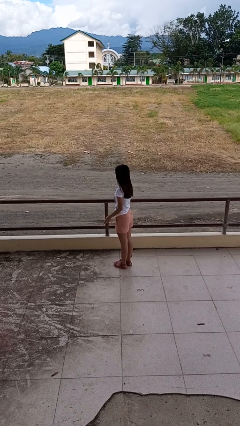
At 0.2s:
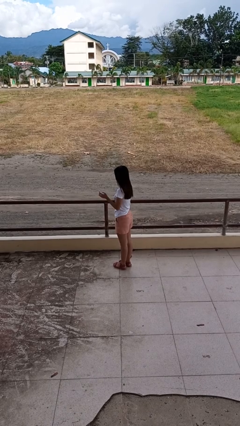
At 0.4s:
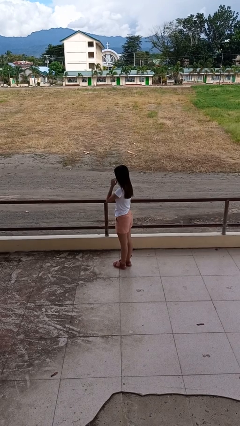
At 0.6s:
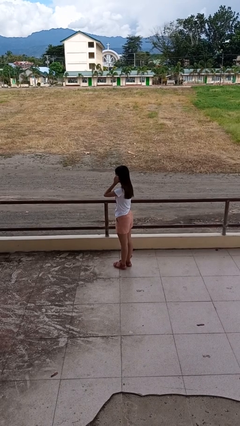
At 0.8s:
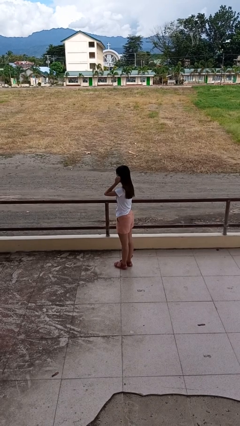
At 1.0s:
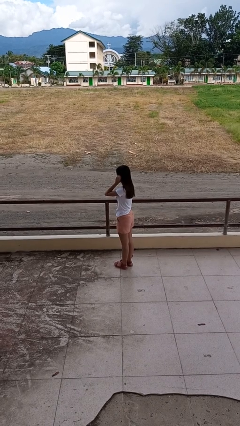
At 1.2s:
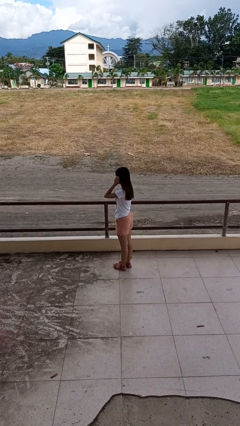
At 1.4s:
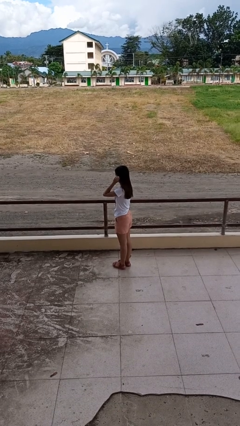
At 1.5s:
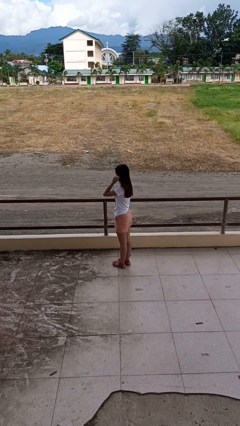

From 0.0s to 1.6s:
person touches earlobe

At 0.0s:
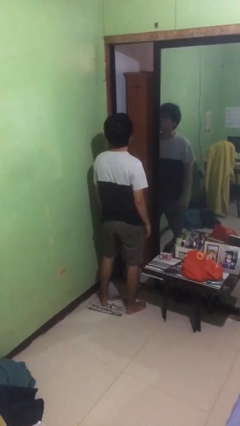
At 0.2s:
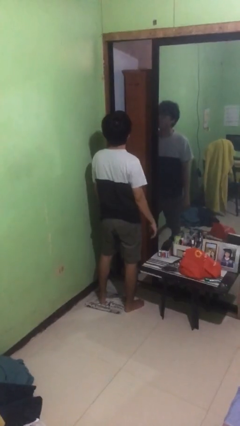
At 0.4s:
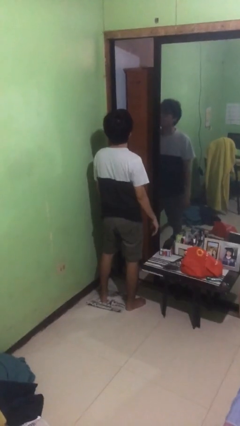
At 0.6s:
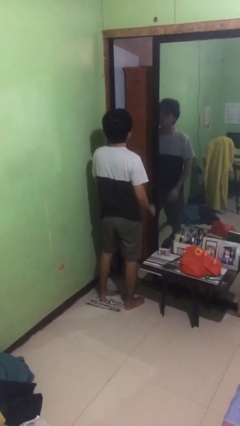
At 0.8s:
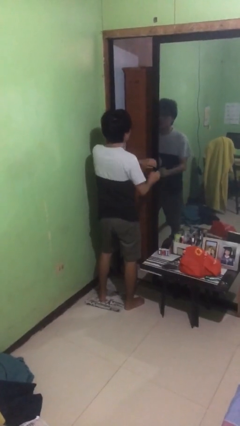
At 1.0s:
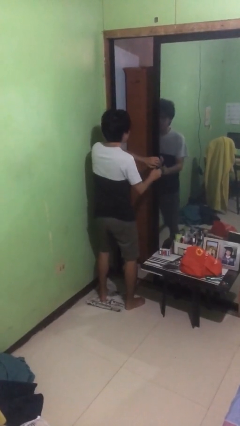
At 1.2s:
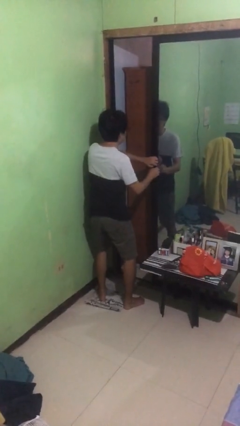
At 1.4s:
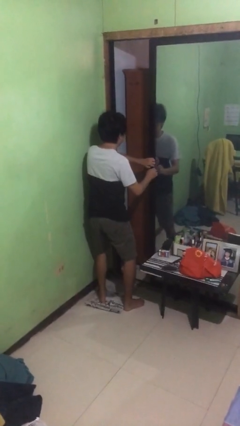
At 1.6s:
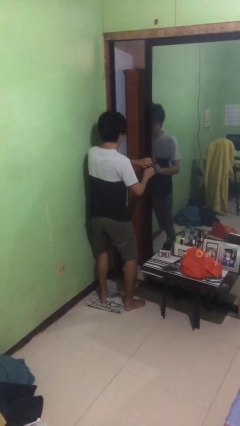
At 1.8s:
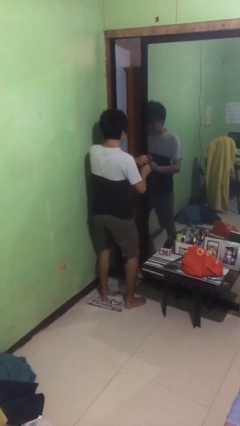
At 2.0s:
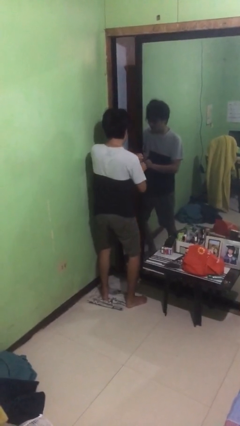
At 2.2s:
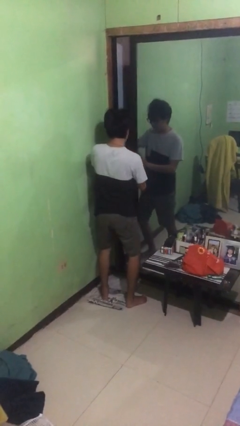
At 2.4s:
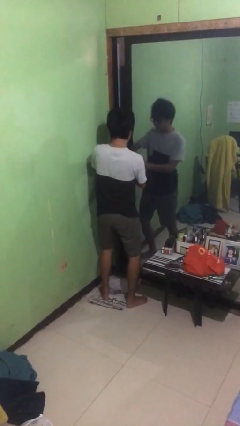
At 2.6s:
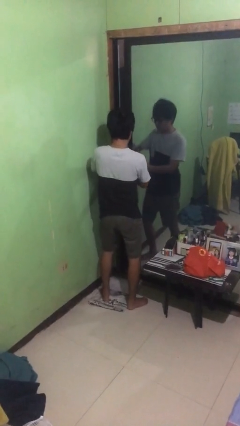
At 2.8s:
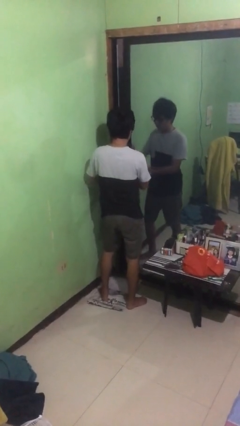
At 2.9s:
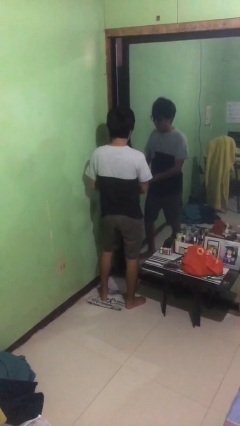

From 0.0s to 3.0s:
person closes sliding door

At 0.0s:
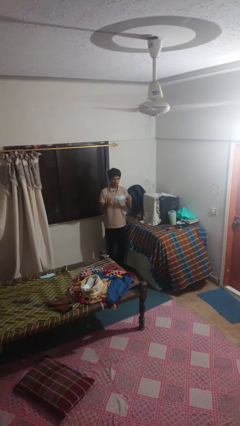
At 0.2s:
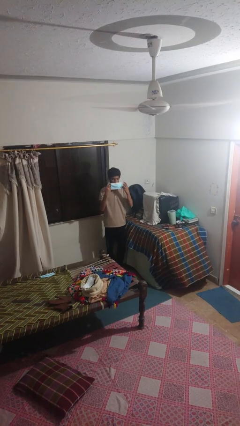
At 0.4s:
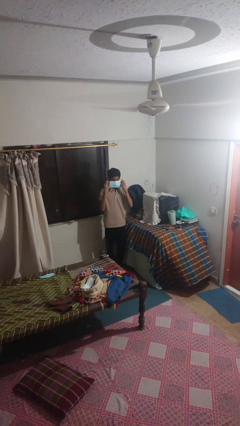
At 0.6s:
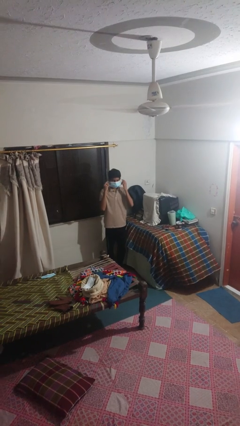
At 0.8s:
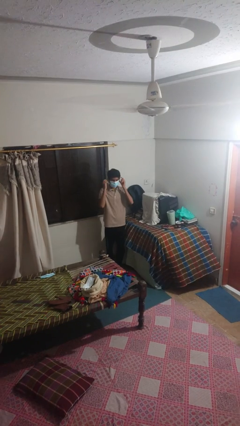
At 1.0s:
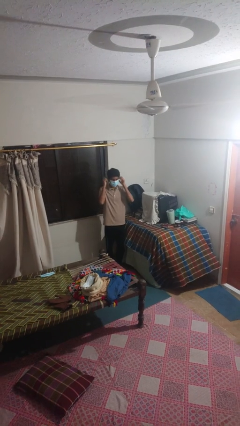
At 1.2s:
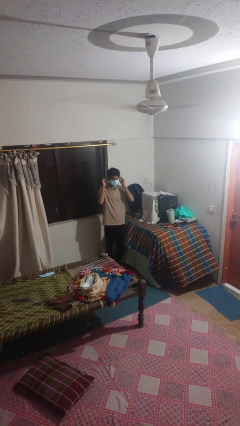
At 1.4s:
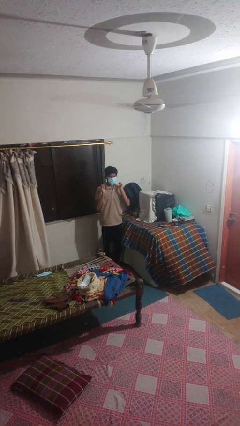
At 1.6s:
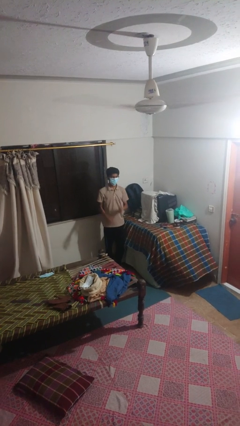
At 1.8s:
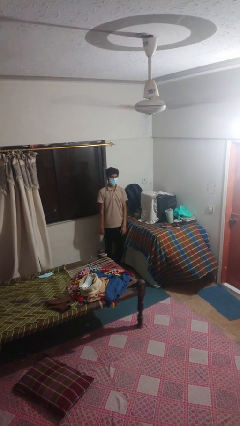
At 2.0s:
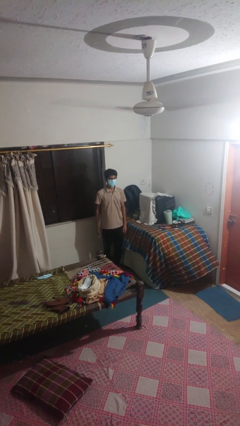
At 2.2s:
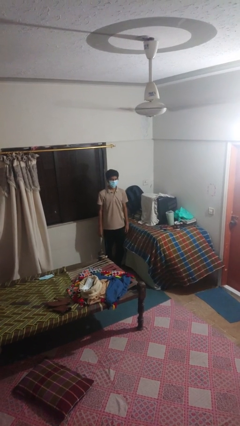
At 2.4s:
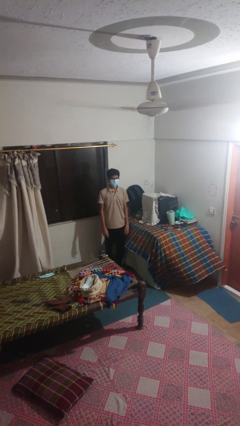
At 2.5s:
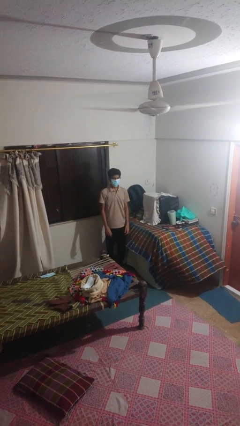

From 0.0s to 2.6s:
person puts on facemask

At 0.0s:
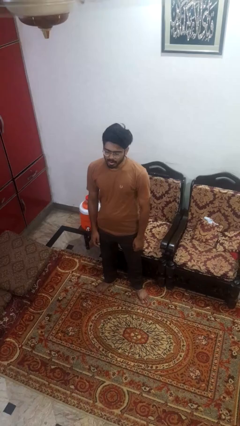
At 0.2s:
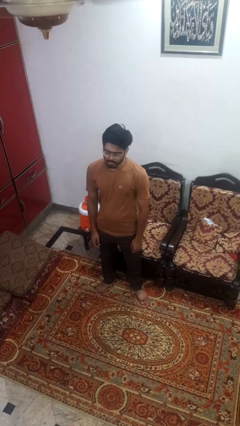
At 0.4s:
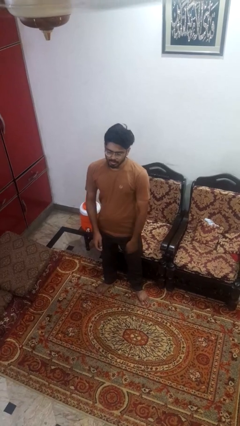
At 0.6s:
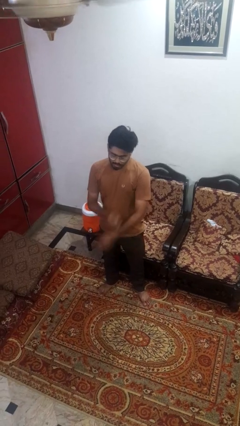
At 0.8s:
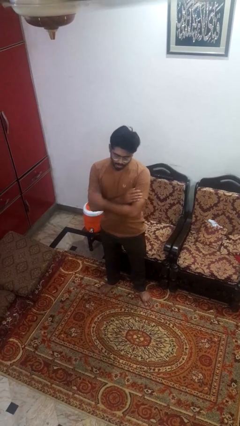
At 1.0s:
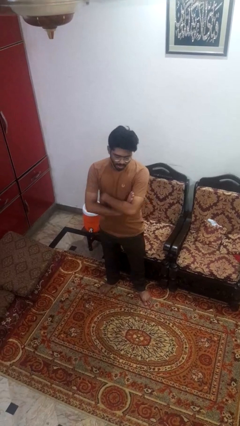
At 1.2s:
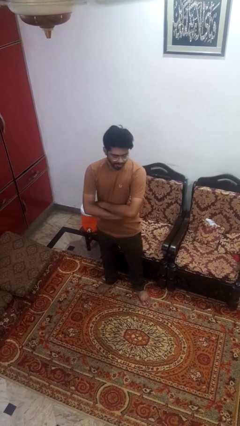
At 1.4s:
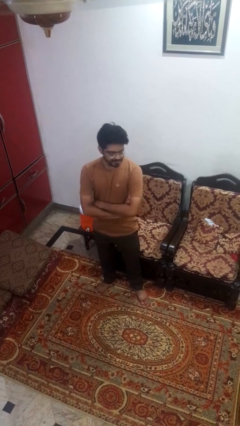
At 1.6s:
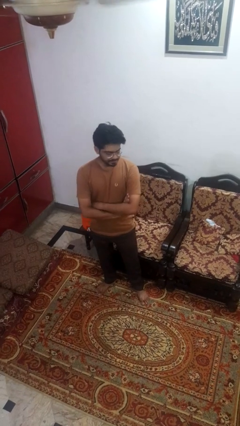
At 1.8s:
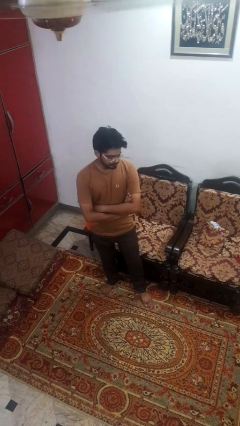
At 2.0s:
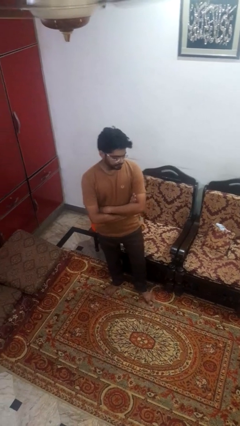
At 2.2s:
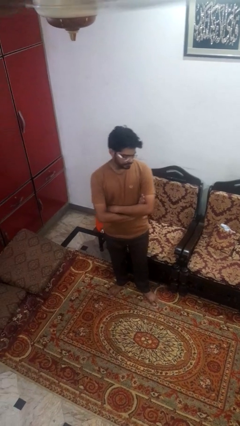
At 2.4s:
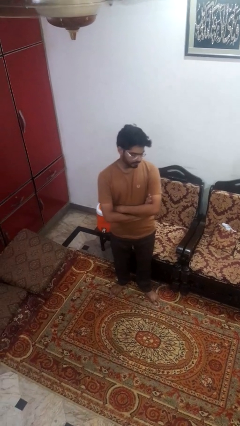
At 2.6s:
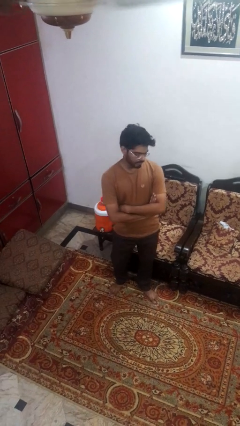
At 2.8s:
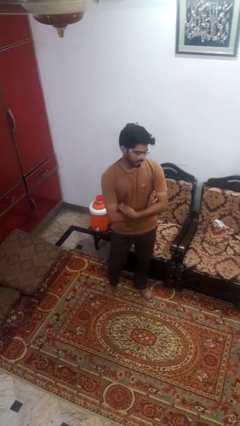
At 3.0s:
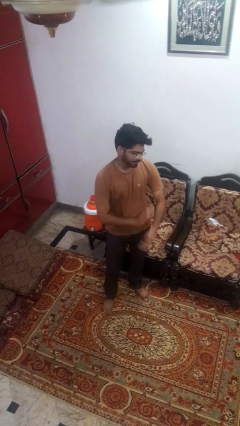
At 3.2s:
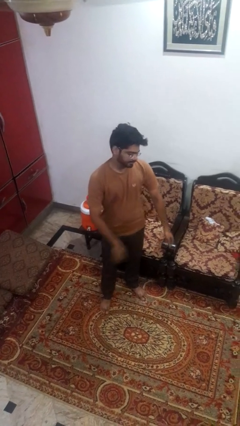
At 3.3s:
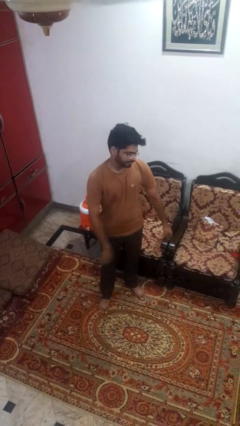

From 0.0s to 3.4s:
person crosses arms

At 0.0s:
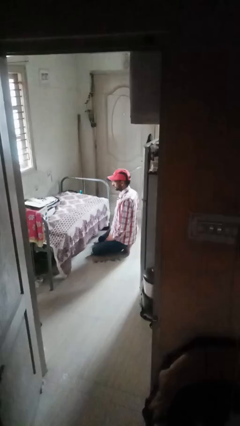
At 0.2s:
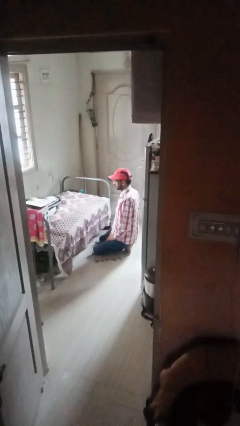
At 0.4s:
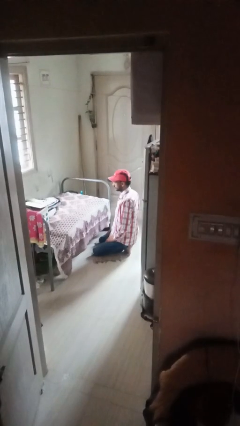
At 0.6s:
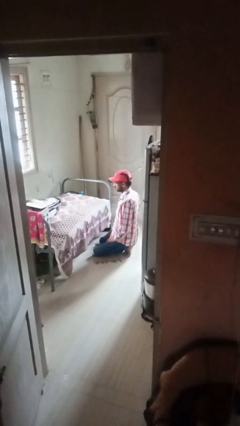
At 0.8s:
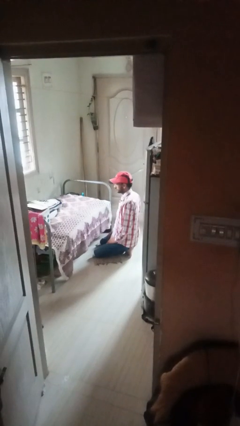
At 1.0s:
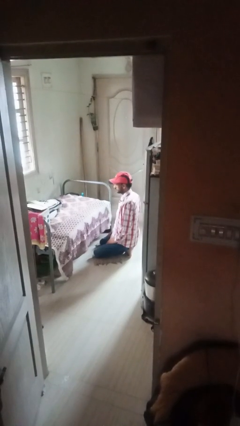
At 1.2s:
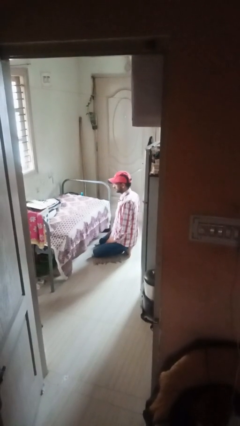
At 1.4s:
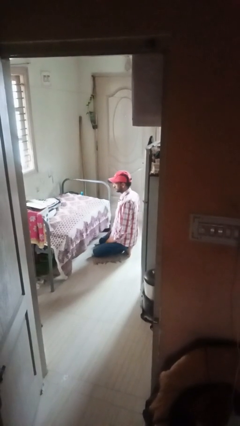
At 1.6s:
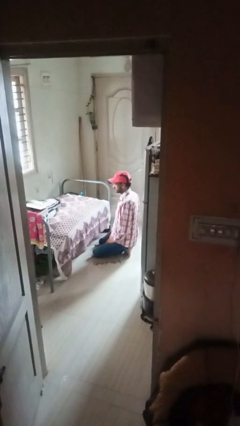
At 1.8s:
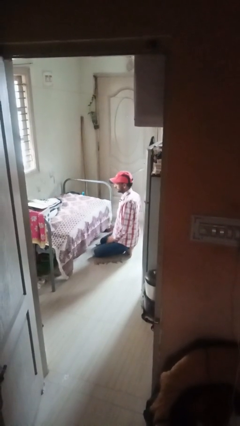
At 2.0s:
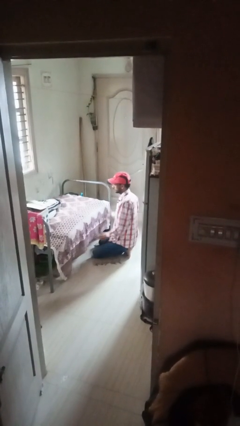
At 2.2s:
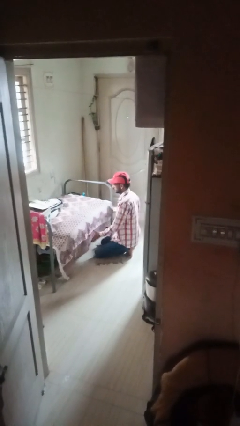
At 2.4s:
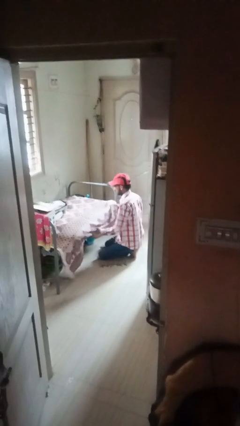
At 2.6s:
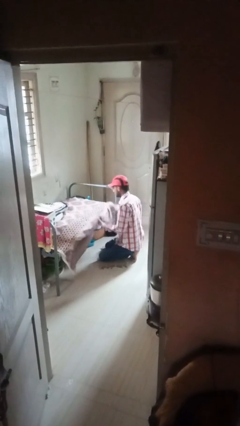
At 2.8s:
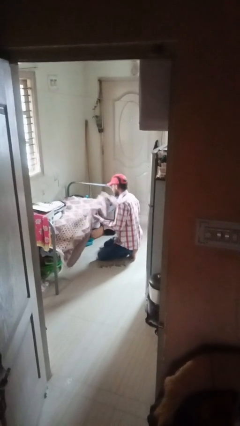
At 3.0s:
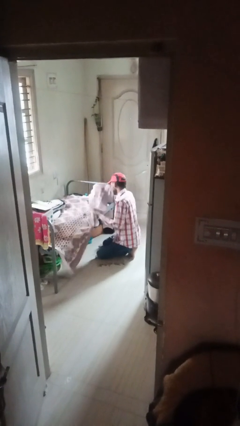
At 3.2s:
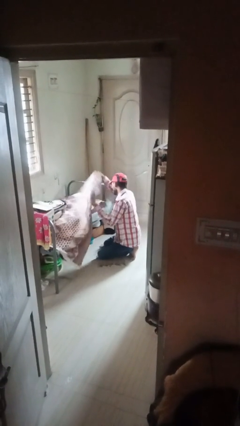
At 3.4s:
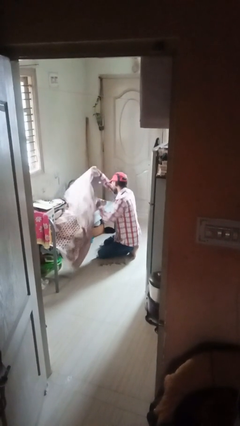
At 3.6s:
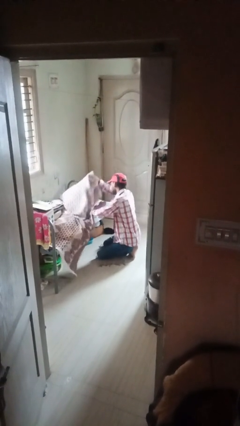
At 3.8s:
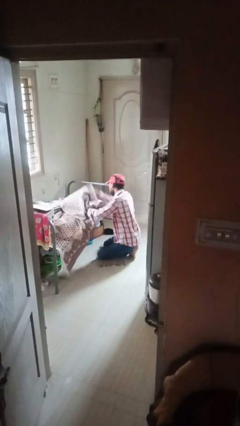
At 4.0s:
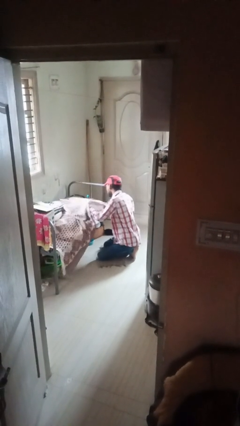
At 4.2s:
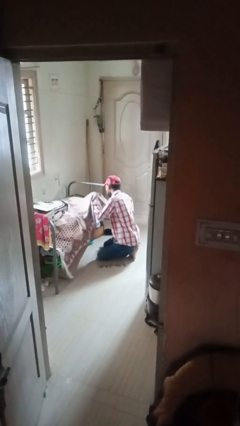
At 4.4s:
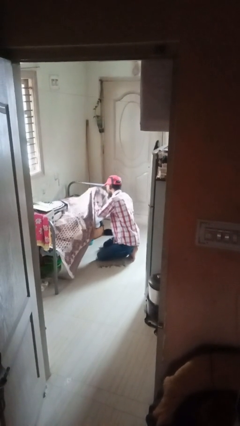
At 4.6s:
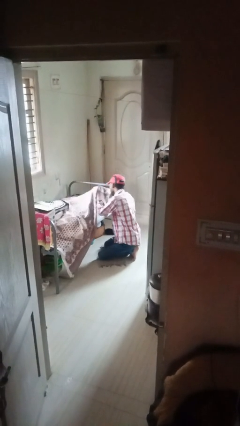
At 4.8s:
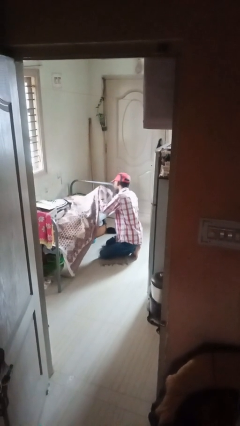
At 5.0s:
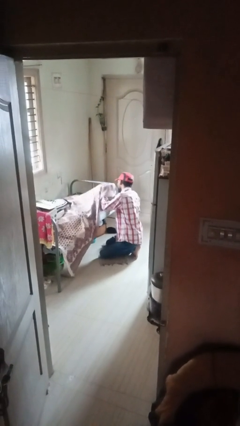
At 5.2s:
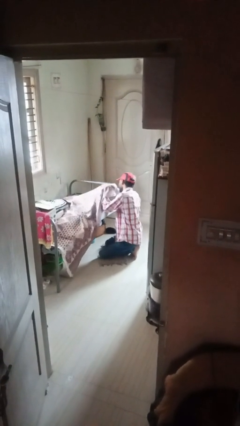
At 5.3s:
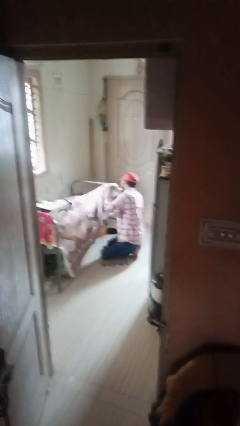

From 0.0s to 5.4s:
person searches under couch

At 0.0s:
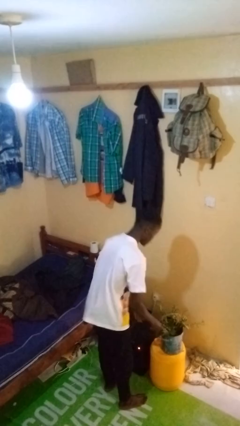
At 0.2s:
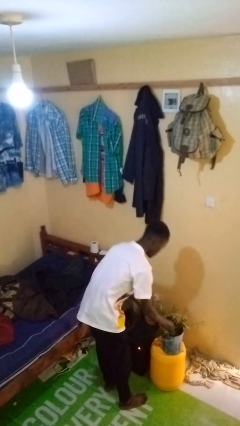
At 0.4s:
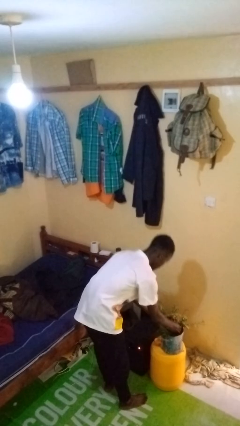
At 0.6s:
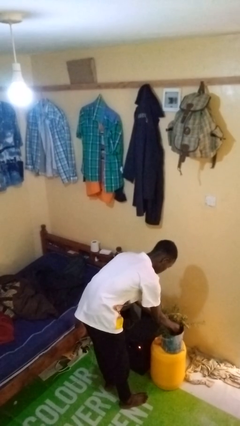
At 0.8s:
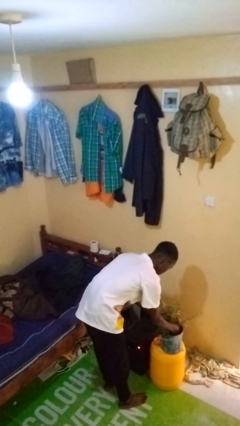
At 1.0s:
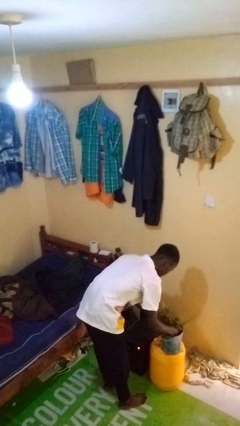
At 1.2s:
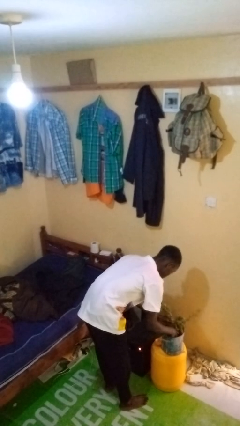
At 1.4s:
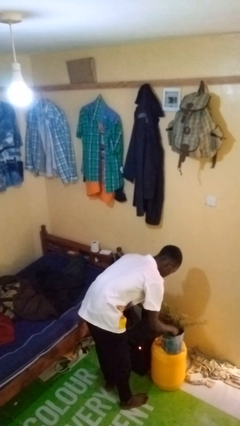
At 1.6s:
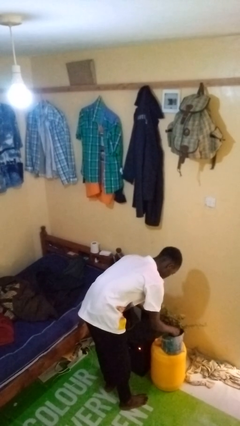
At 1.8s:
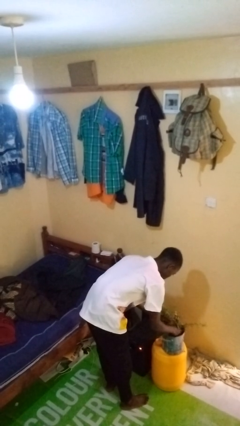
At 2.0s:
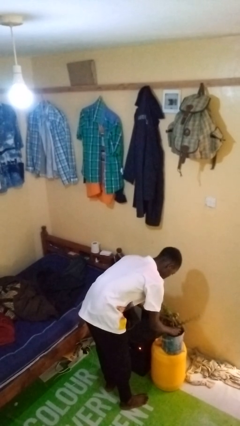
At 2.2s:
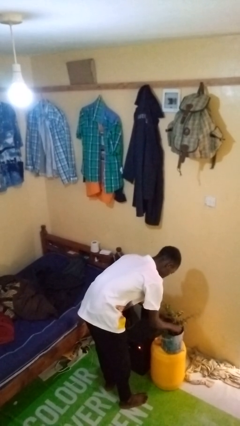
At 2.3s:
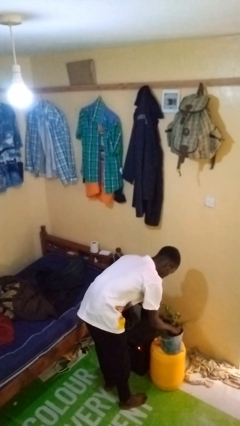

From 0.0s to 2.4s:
person arranges flowers in vase
